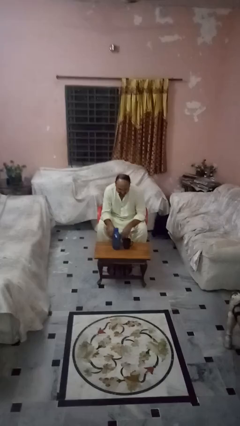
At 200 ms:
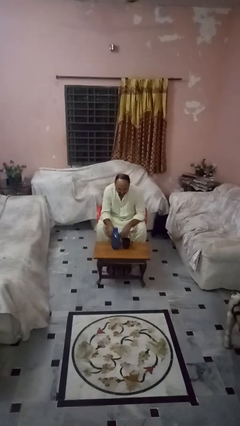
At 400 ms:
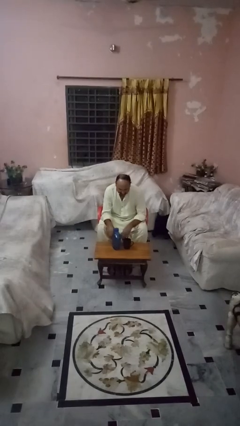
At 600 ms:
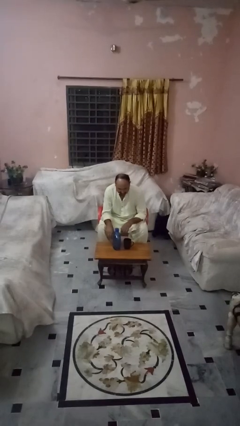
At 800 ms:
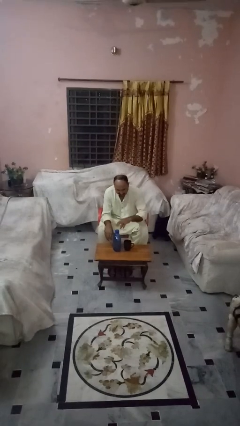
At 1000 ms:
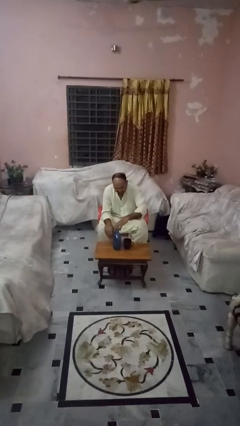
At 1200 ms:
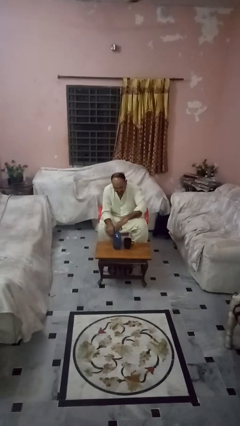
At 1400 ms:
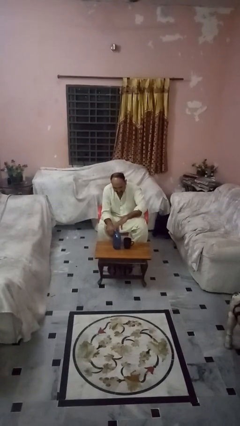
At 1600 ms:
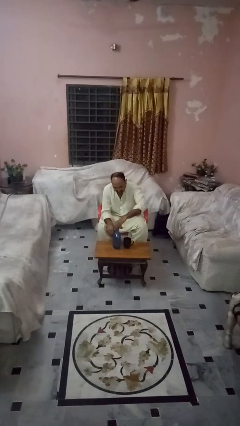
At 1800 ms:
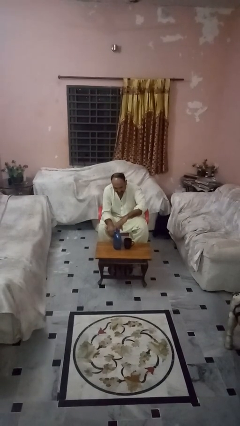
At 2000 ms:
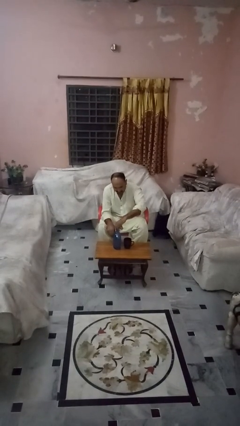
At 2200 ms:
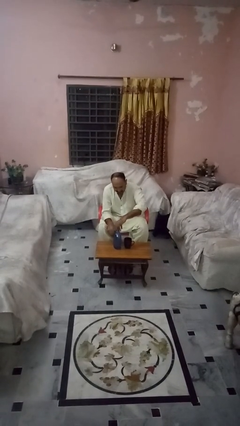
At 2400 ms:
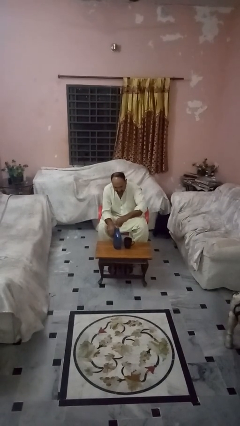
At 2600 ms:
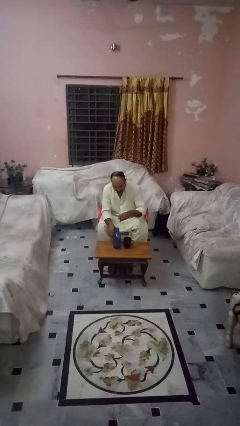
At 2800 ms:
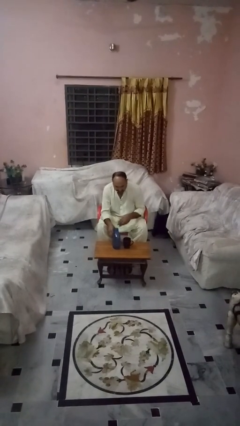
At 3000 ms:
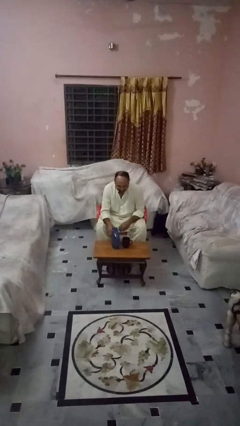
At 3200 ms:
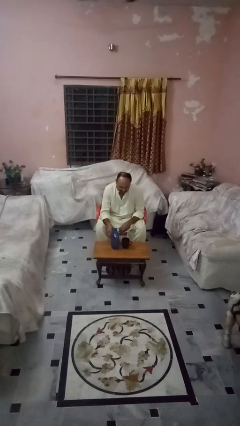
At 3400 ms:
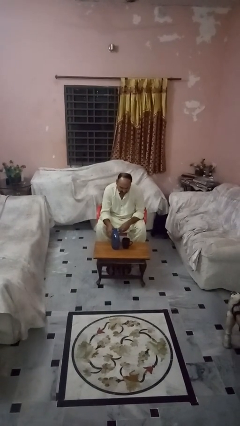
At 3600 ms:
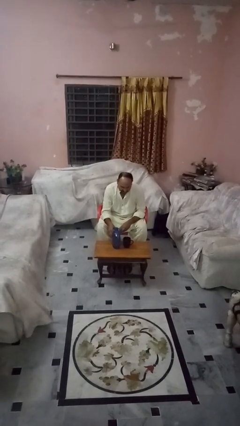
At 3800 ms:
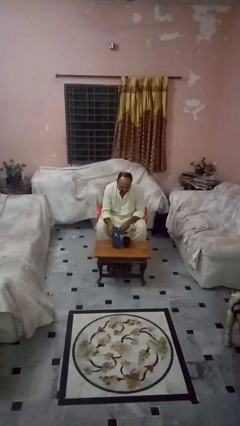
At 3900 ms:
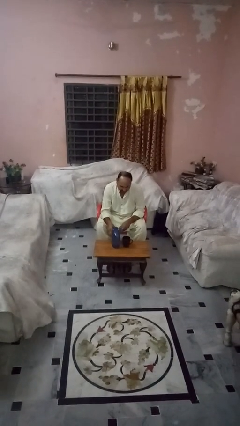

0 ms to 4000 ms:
person unscrews lid from bottle

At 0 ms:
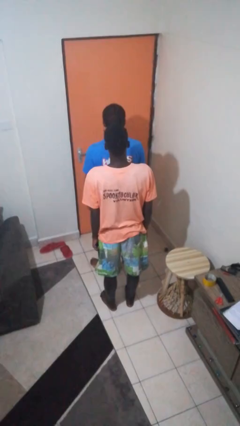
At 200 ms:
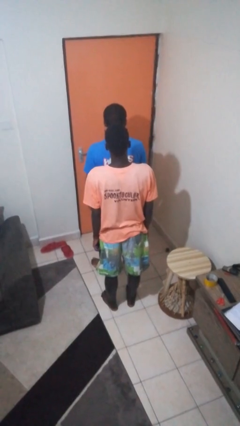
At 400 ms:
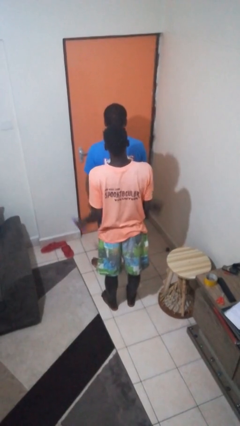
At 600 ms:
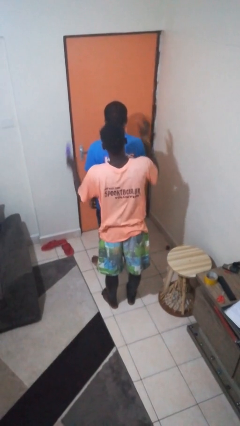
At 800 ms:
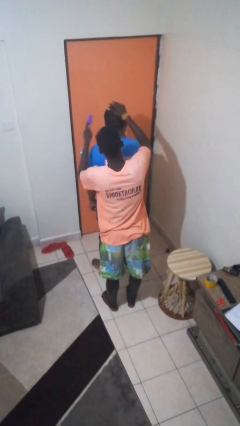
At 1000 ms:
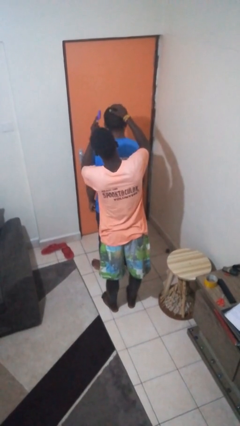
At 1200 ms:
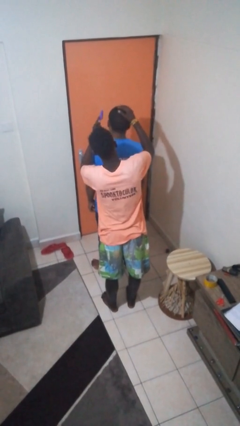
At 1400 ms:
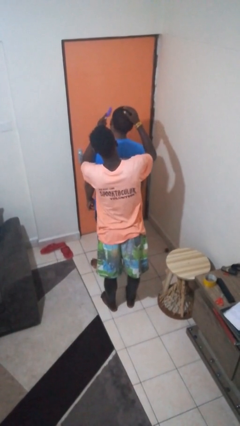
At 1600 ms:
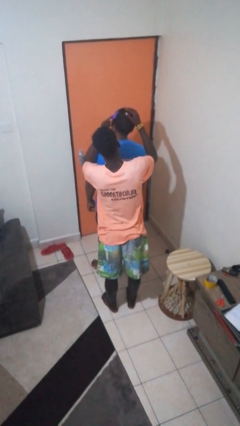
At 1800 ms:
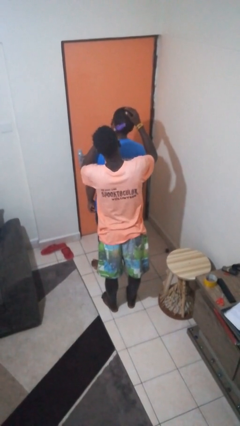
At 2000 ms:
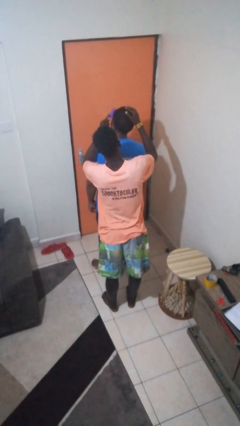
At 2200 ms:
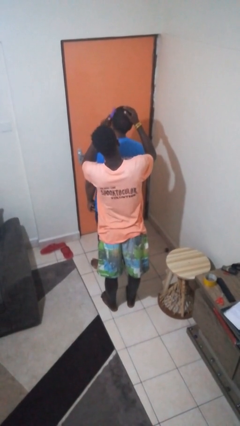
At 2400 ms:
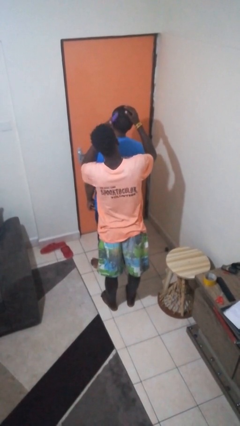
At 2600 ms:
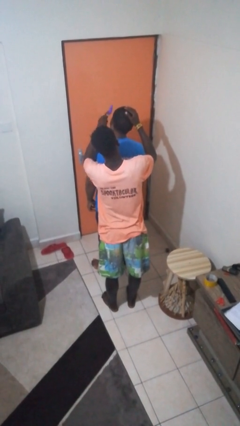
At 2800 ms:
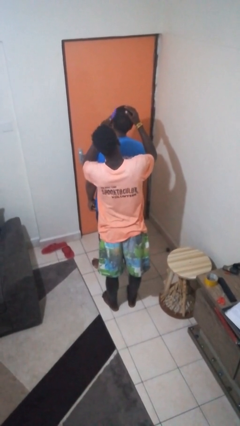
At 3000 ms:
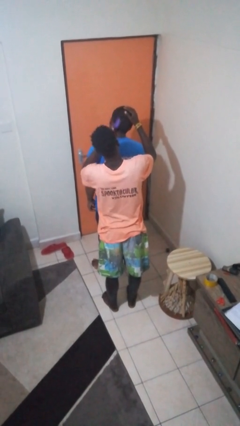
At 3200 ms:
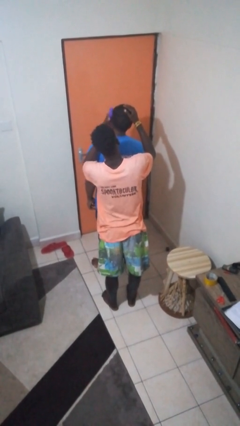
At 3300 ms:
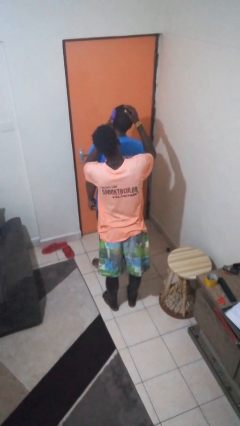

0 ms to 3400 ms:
person brushes hair of person

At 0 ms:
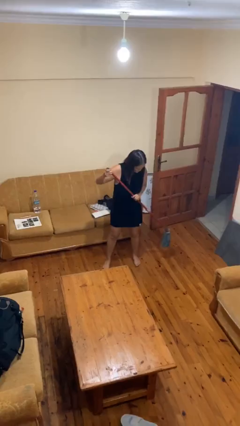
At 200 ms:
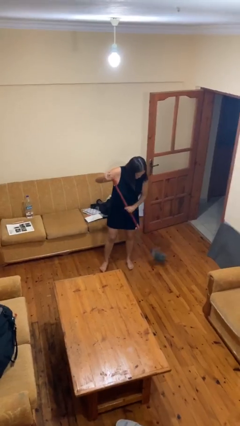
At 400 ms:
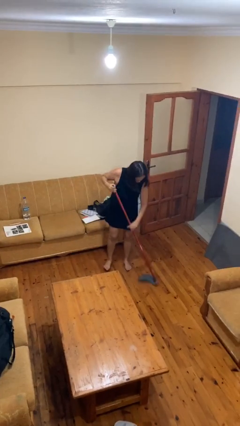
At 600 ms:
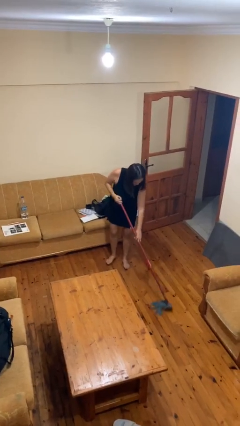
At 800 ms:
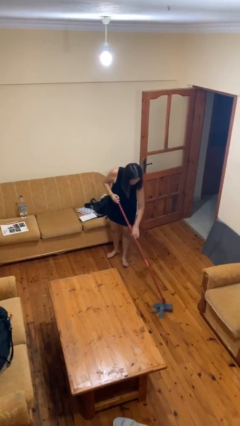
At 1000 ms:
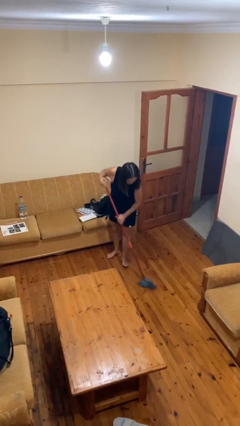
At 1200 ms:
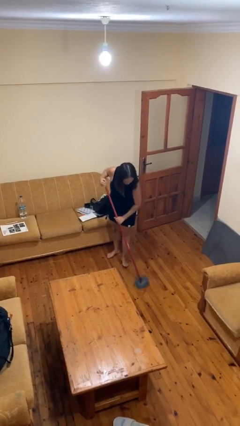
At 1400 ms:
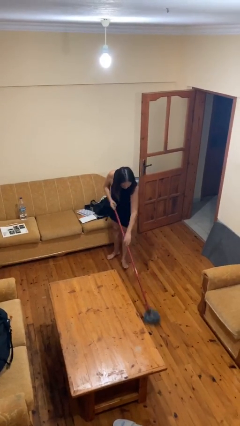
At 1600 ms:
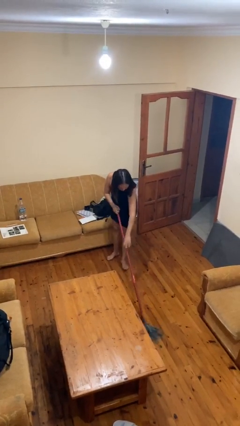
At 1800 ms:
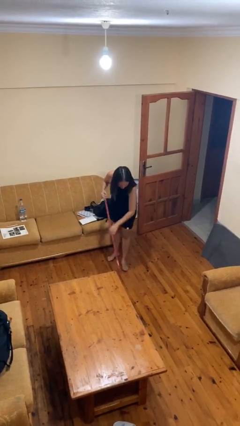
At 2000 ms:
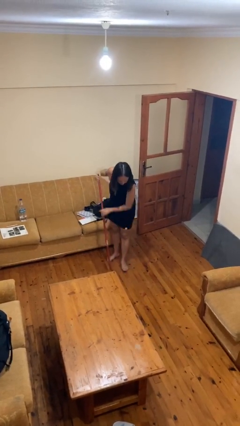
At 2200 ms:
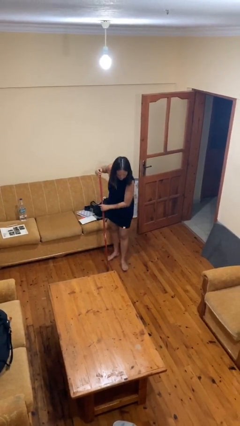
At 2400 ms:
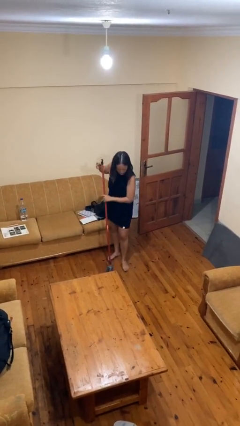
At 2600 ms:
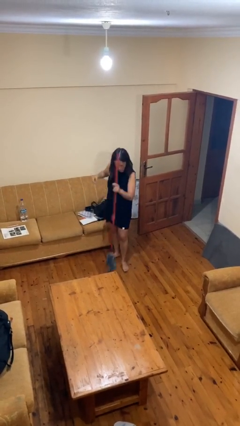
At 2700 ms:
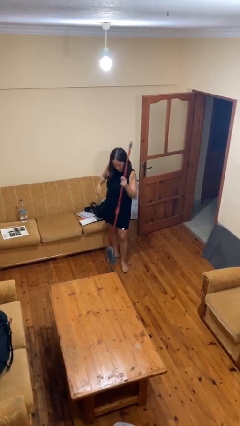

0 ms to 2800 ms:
person mops

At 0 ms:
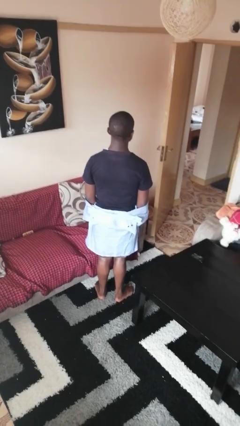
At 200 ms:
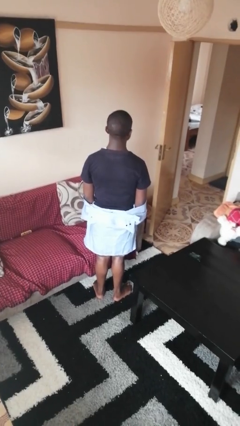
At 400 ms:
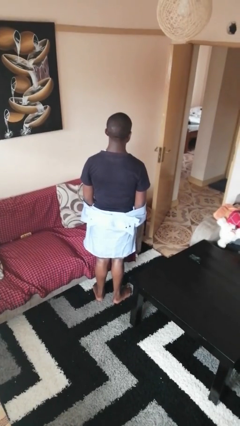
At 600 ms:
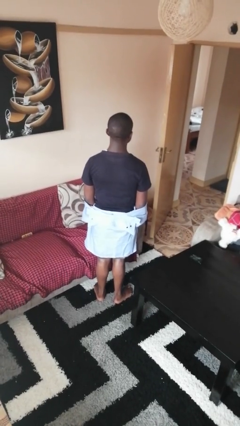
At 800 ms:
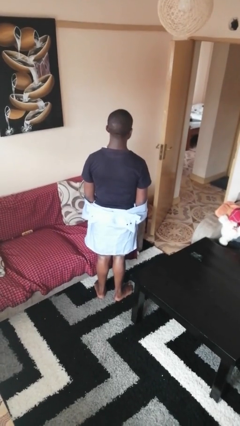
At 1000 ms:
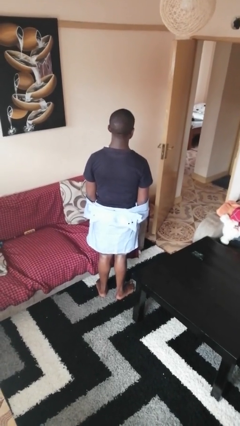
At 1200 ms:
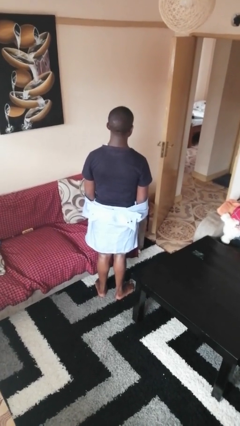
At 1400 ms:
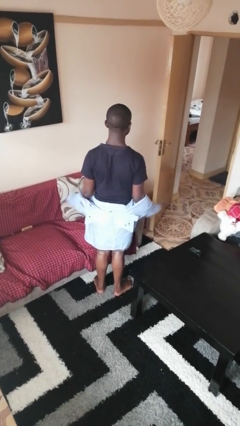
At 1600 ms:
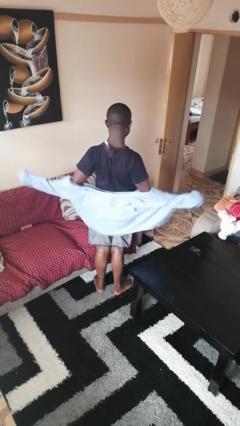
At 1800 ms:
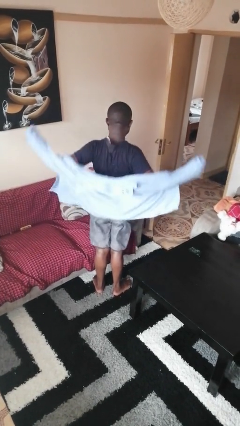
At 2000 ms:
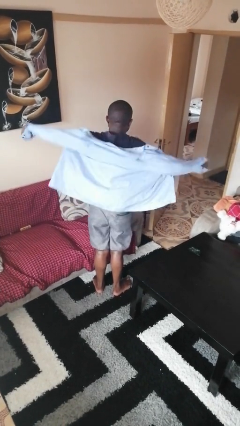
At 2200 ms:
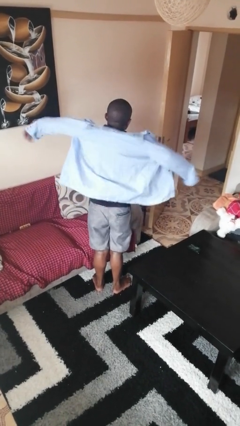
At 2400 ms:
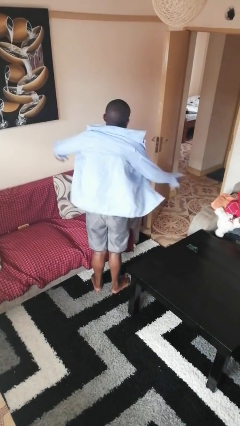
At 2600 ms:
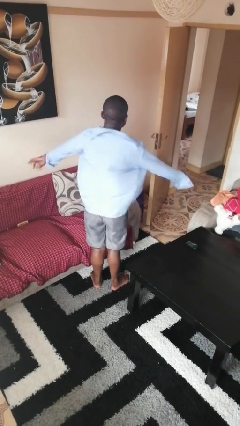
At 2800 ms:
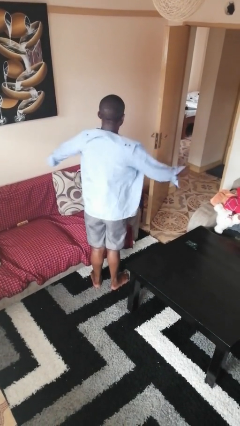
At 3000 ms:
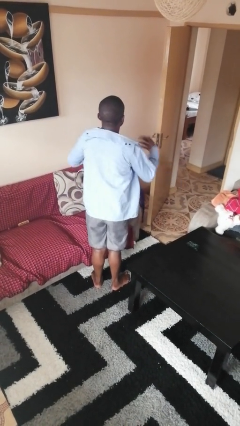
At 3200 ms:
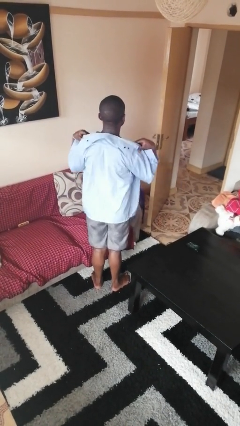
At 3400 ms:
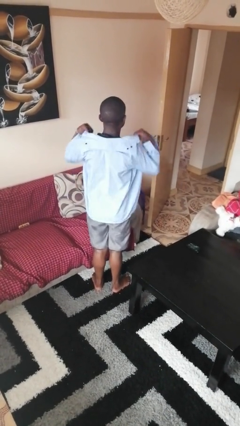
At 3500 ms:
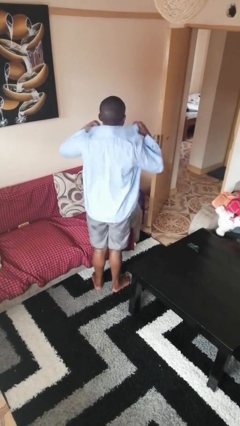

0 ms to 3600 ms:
person puts on shirt

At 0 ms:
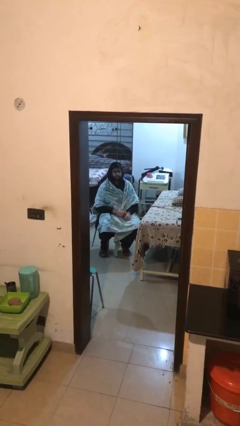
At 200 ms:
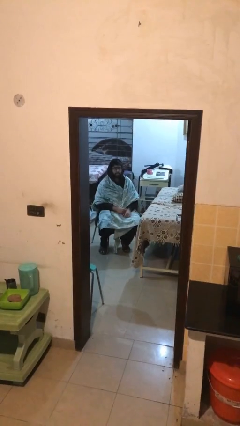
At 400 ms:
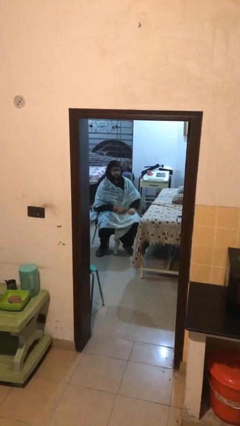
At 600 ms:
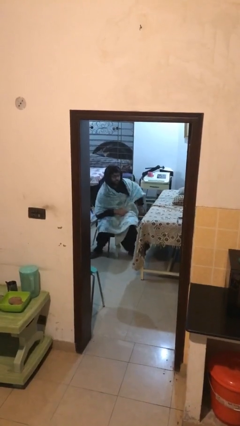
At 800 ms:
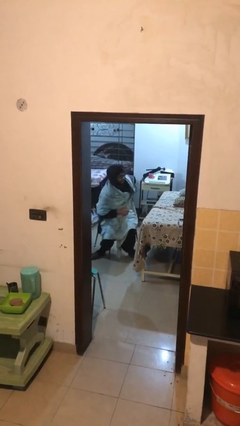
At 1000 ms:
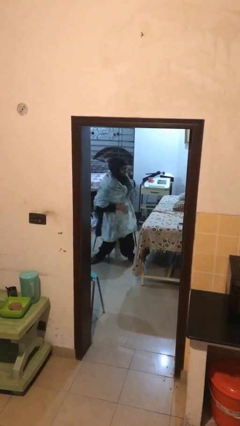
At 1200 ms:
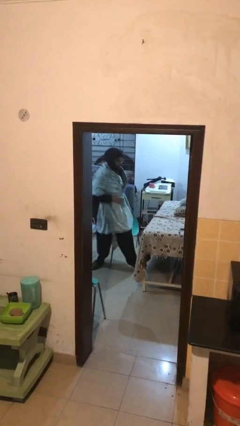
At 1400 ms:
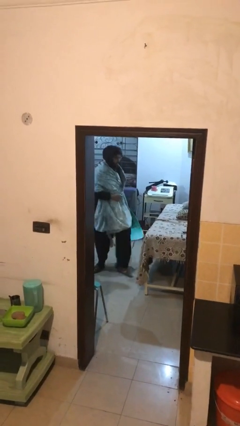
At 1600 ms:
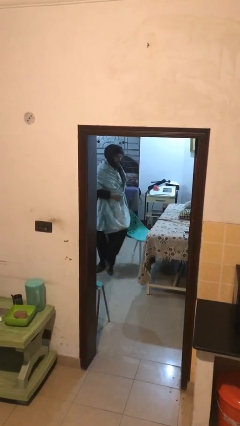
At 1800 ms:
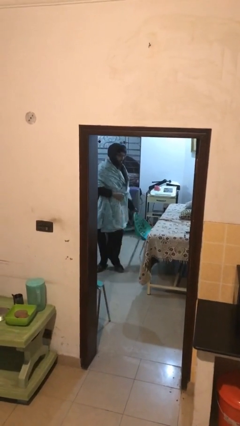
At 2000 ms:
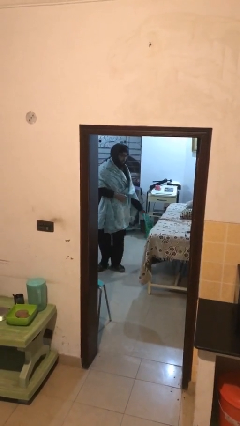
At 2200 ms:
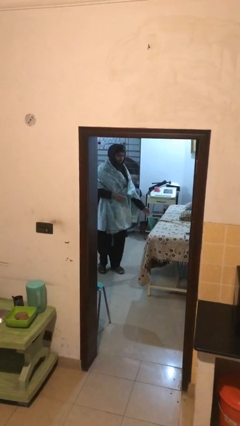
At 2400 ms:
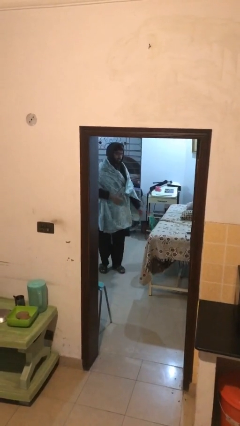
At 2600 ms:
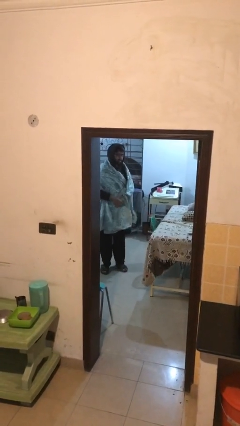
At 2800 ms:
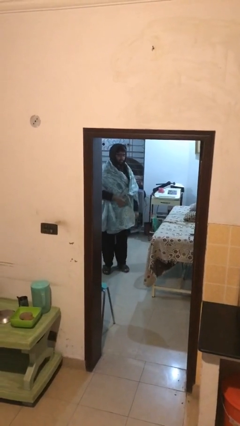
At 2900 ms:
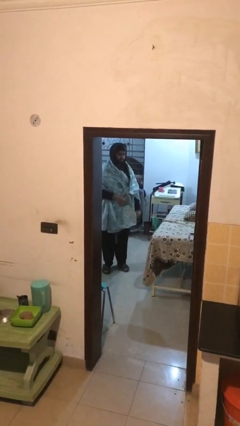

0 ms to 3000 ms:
person stands up

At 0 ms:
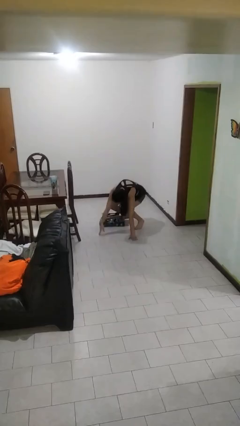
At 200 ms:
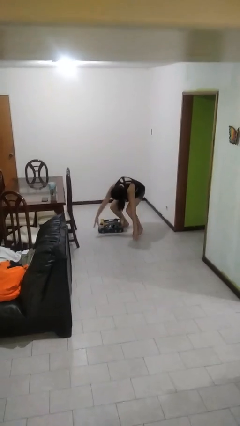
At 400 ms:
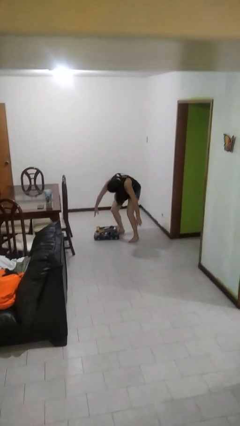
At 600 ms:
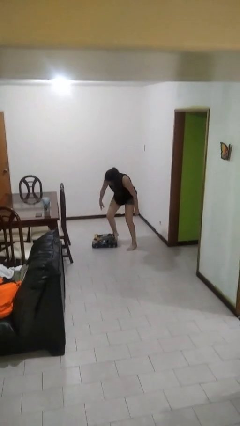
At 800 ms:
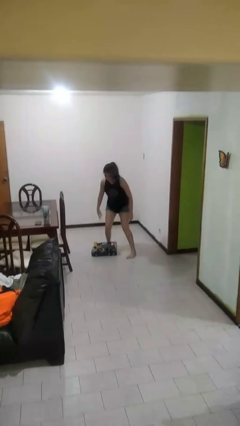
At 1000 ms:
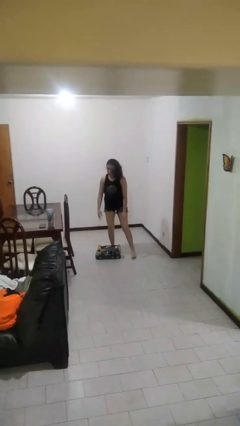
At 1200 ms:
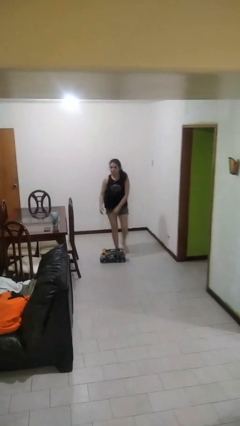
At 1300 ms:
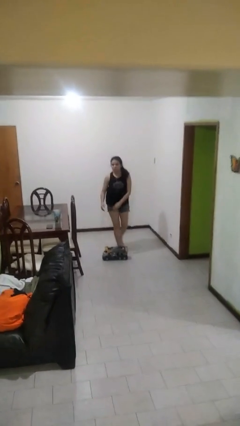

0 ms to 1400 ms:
person stands up from floor
